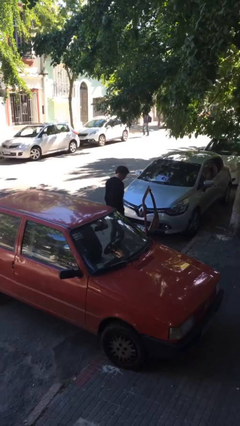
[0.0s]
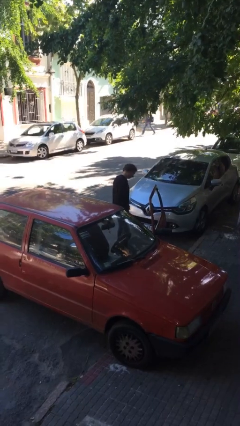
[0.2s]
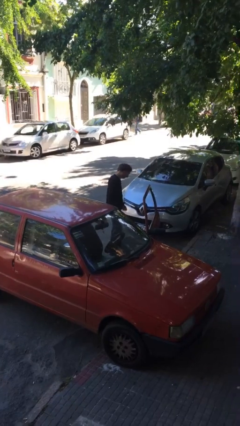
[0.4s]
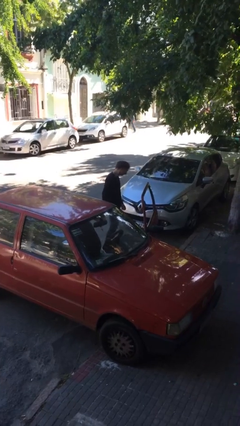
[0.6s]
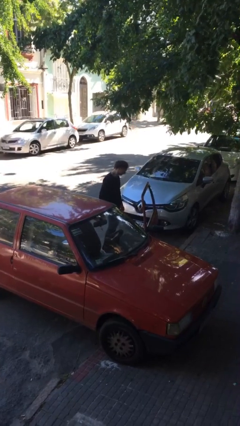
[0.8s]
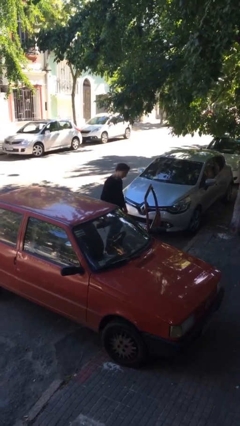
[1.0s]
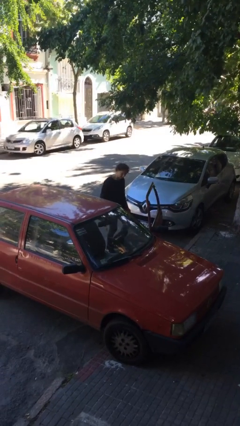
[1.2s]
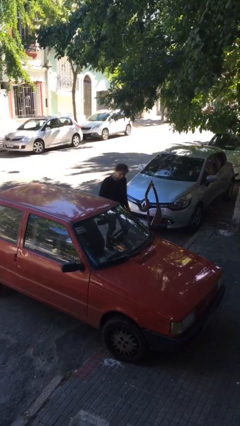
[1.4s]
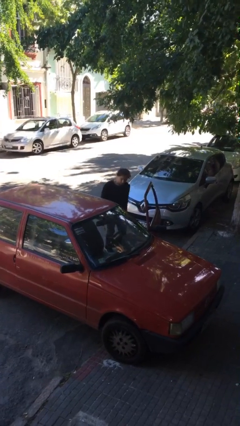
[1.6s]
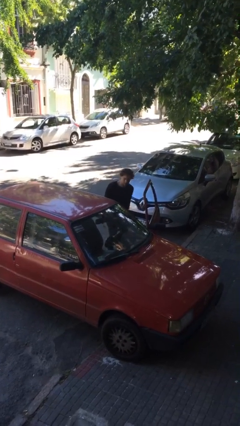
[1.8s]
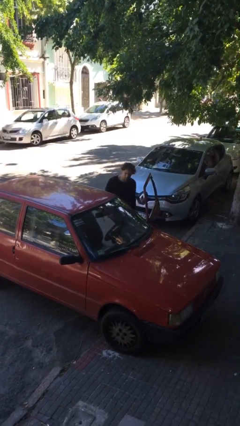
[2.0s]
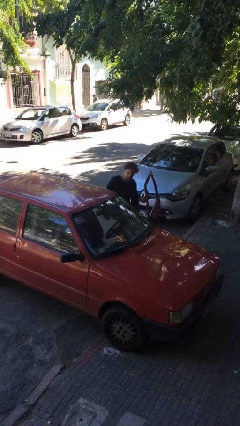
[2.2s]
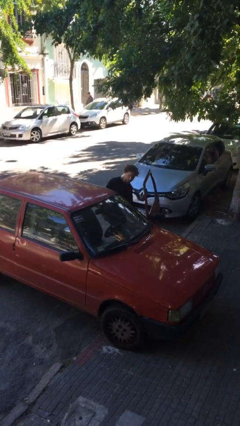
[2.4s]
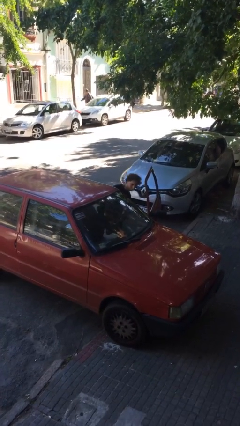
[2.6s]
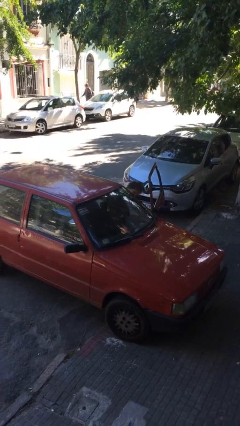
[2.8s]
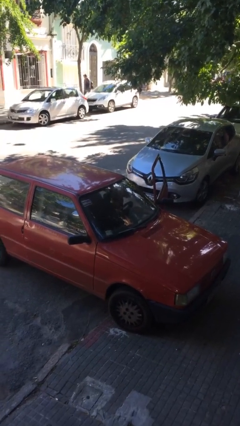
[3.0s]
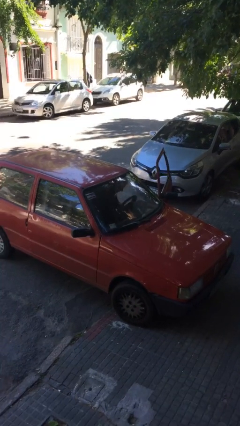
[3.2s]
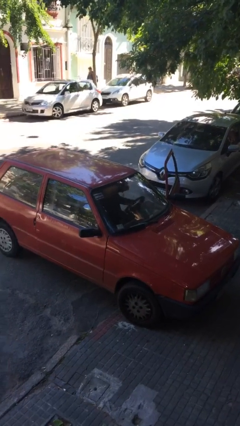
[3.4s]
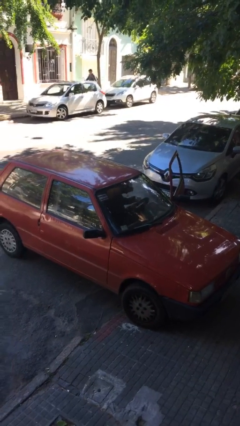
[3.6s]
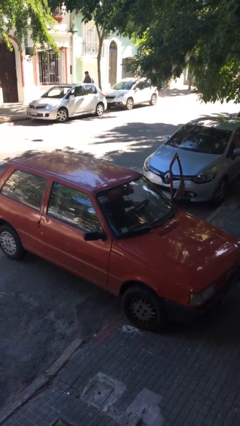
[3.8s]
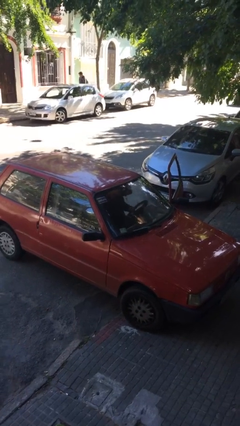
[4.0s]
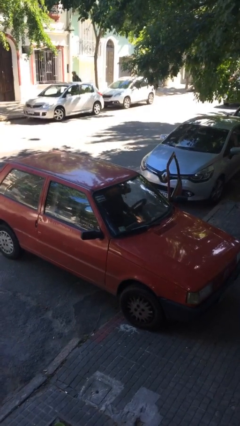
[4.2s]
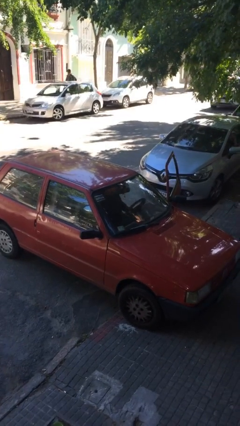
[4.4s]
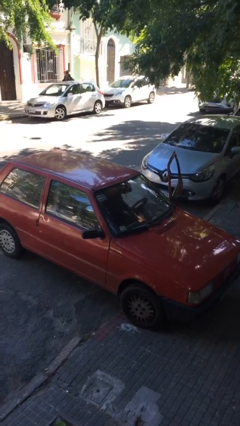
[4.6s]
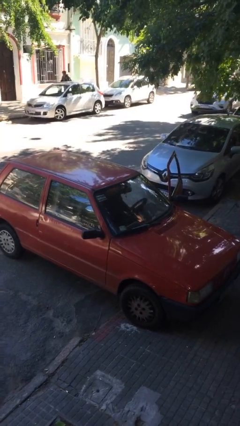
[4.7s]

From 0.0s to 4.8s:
person enters car

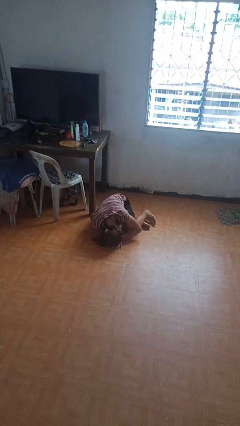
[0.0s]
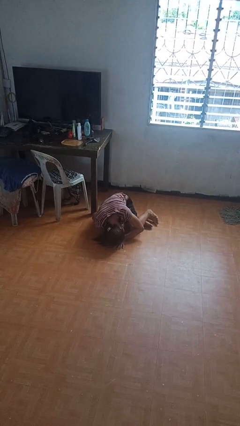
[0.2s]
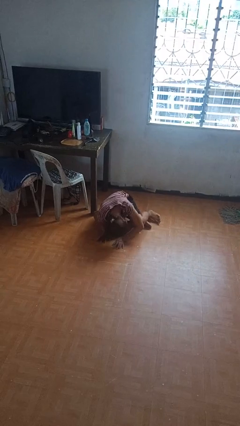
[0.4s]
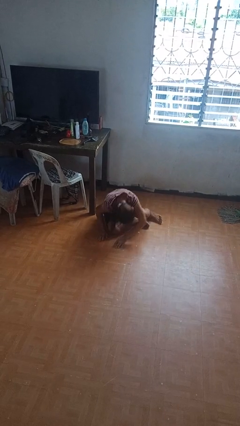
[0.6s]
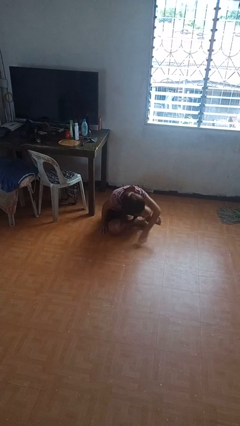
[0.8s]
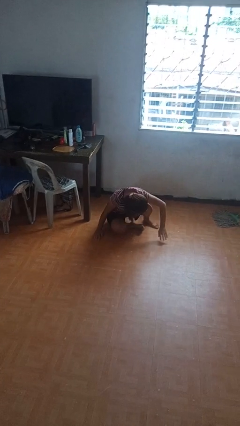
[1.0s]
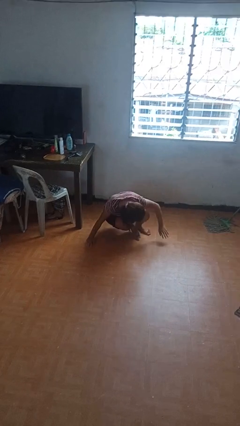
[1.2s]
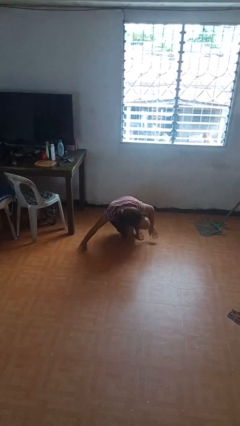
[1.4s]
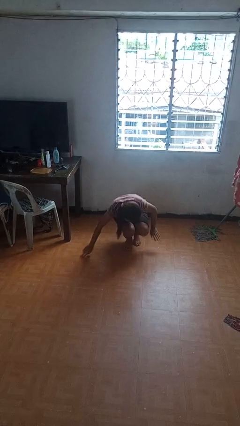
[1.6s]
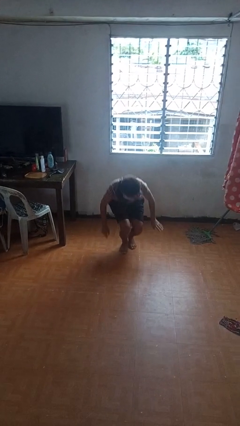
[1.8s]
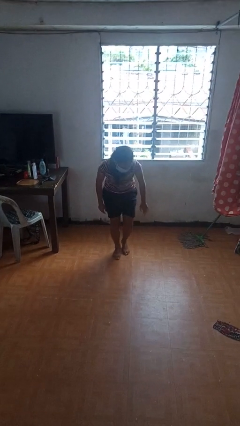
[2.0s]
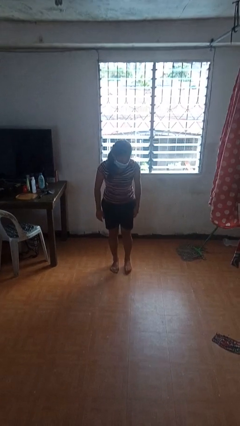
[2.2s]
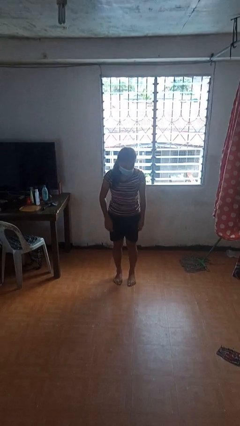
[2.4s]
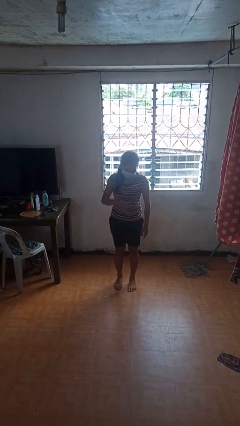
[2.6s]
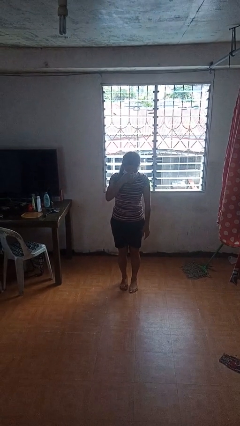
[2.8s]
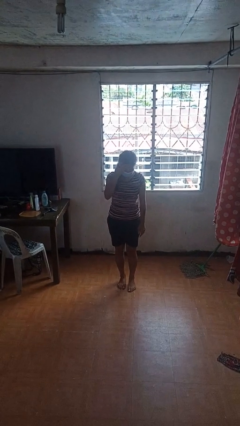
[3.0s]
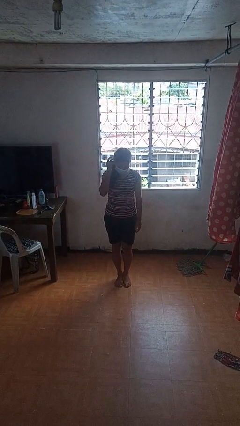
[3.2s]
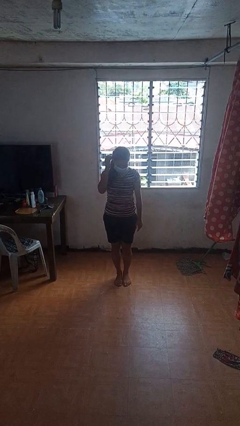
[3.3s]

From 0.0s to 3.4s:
person stands up from floor

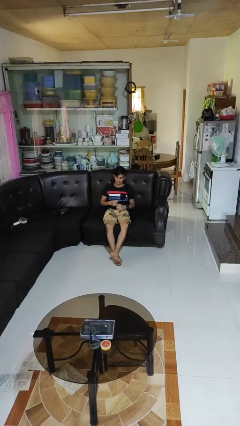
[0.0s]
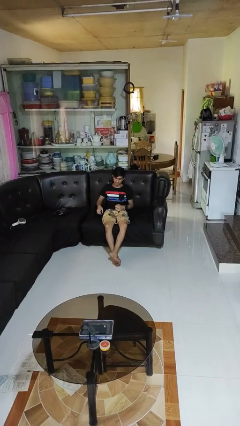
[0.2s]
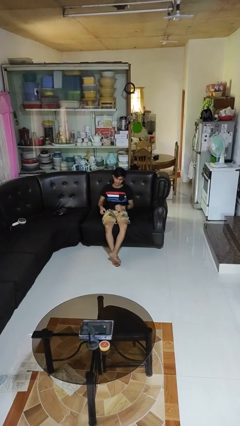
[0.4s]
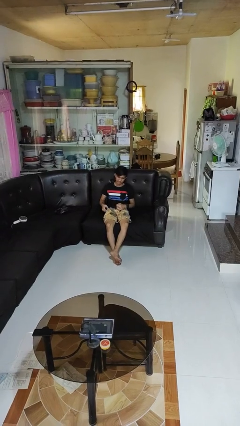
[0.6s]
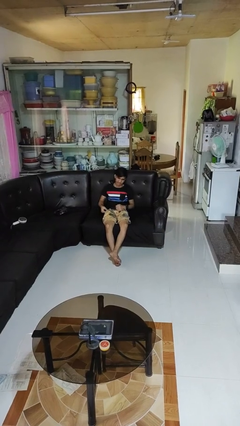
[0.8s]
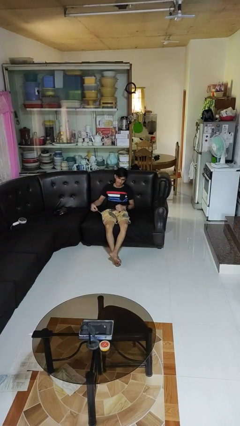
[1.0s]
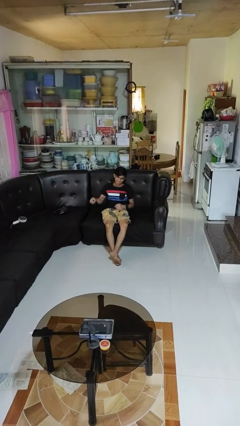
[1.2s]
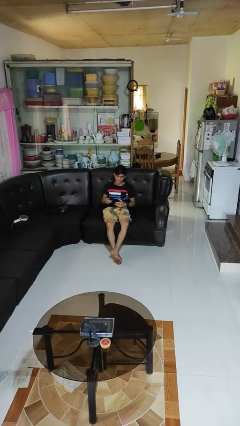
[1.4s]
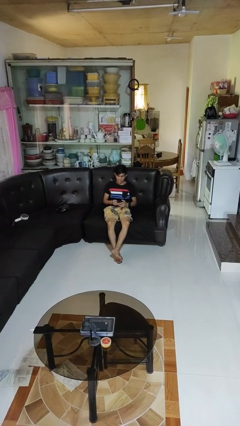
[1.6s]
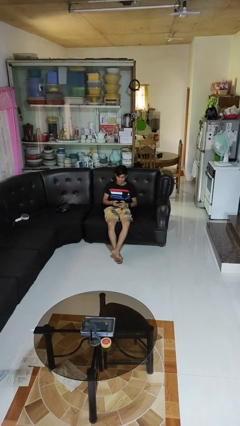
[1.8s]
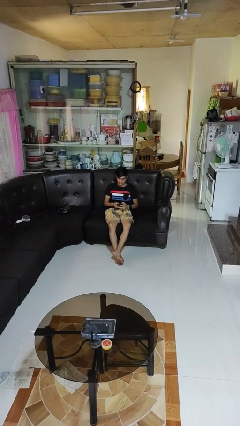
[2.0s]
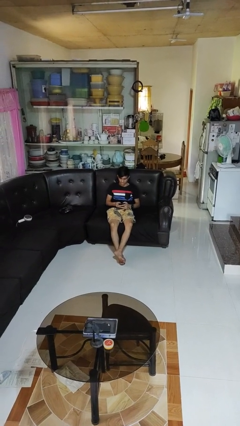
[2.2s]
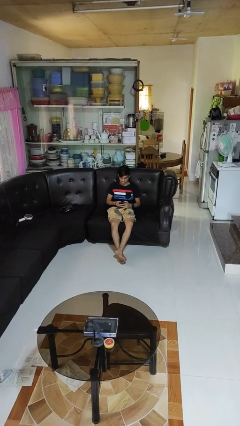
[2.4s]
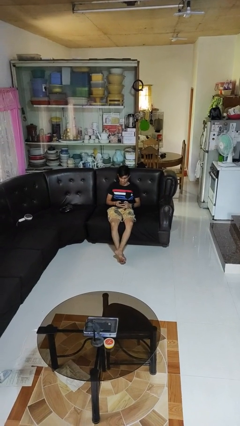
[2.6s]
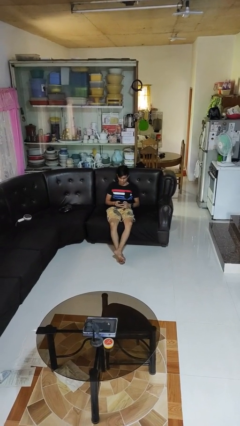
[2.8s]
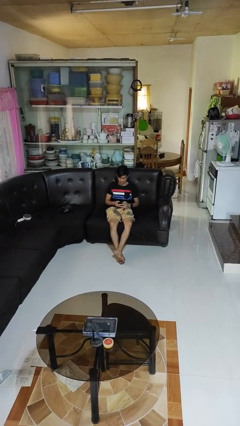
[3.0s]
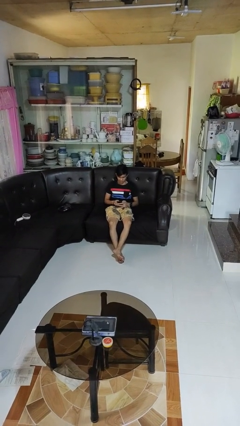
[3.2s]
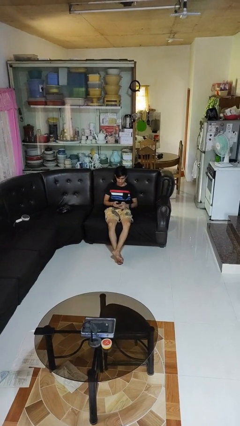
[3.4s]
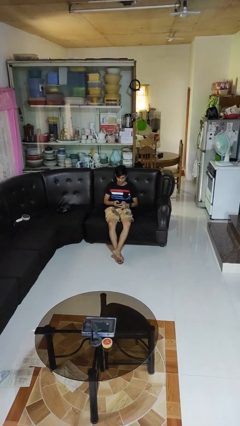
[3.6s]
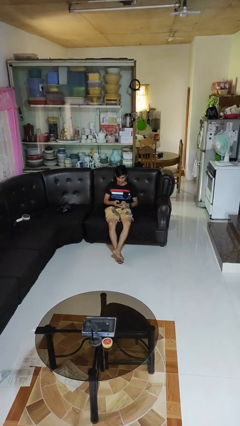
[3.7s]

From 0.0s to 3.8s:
person takes phone from pocket

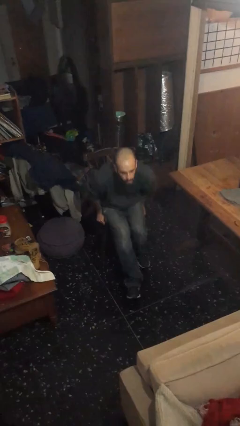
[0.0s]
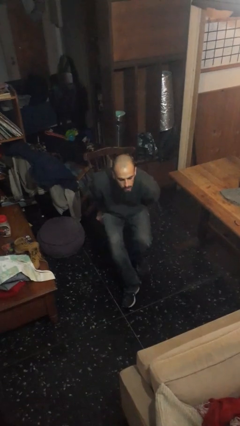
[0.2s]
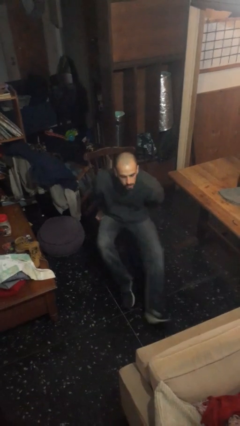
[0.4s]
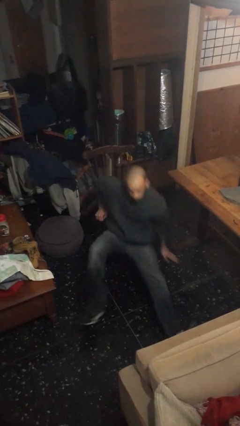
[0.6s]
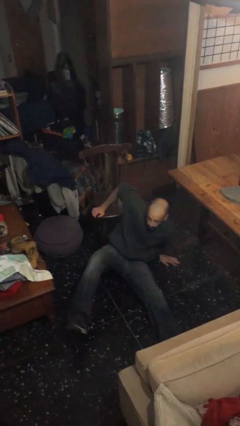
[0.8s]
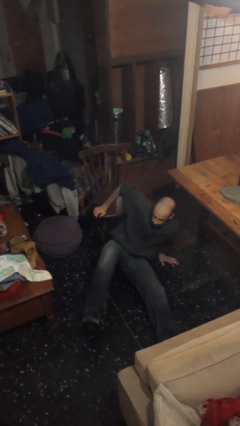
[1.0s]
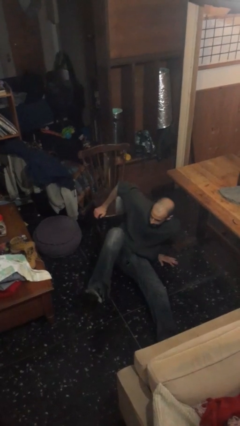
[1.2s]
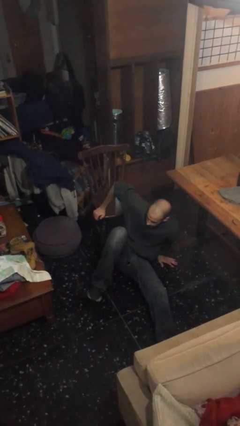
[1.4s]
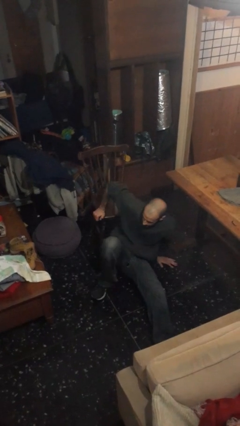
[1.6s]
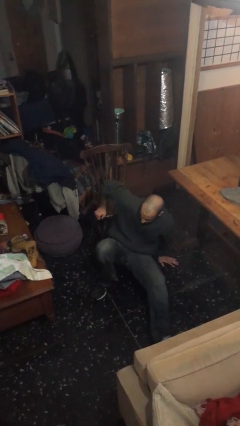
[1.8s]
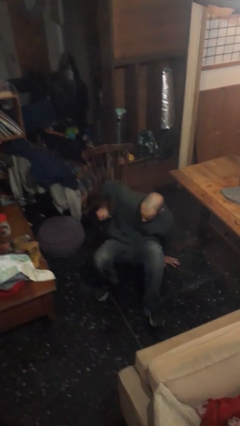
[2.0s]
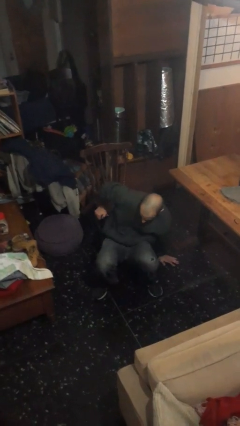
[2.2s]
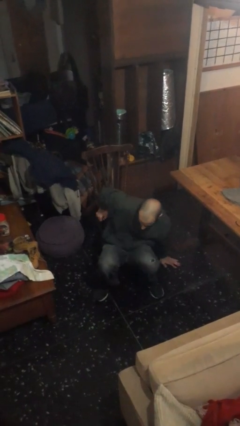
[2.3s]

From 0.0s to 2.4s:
person falls from chair

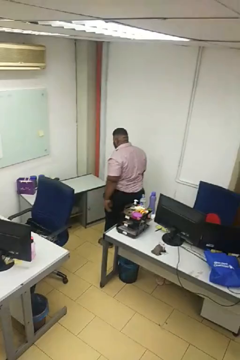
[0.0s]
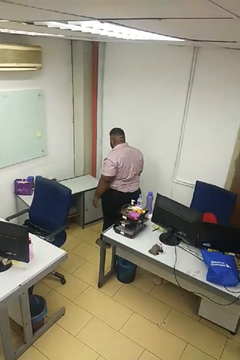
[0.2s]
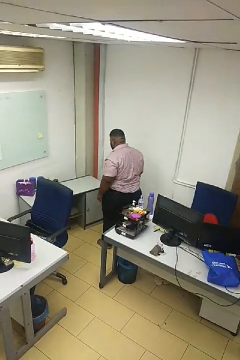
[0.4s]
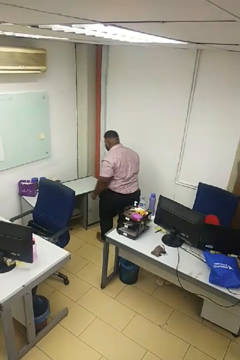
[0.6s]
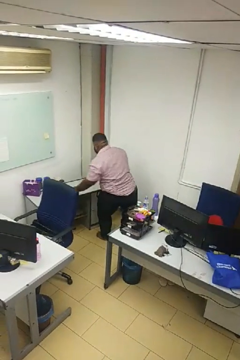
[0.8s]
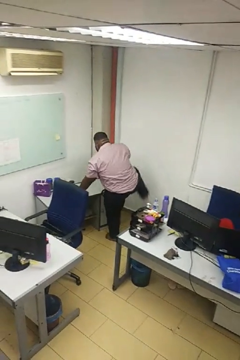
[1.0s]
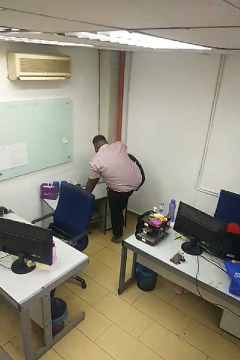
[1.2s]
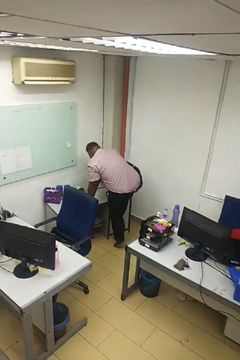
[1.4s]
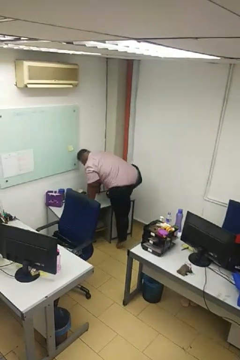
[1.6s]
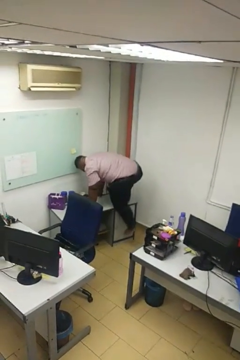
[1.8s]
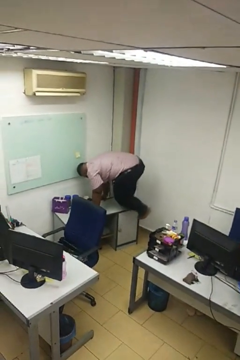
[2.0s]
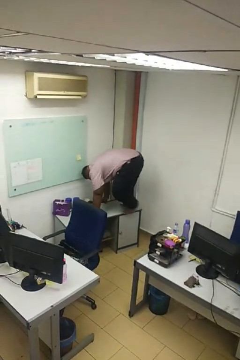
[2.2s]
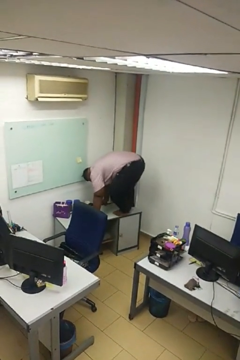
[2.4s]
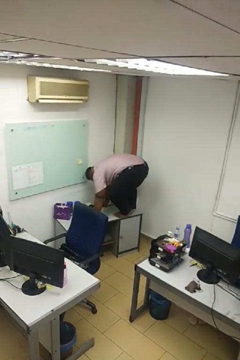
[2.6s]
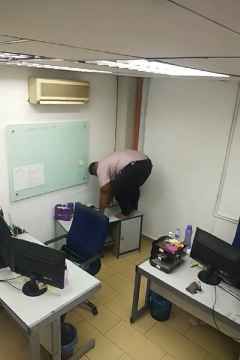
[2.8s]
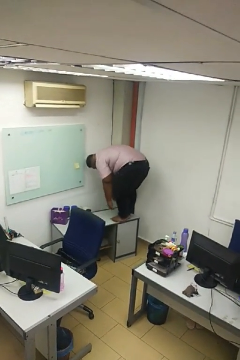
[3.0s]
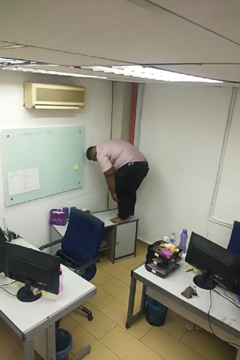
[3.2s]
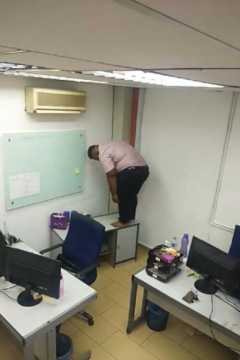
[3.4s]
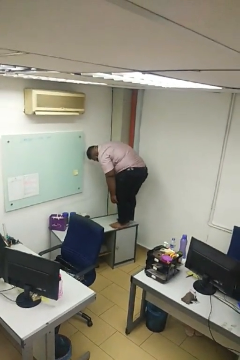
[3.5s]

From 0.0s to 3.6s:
person climbs on table
